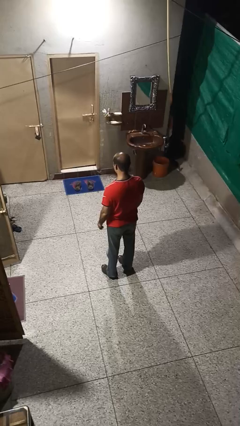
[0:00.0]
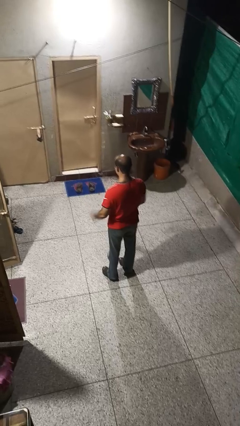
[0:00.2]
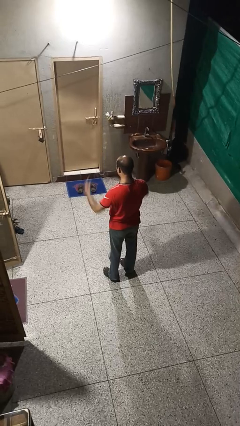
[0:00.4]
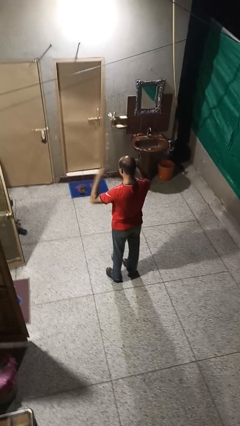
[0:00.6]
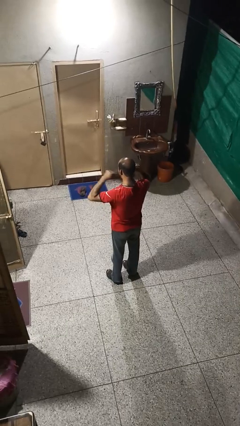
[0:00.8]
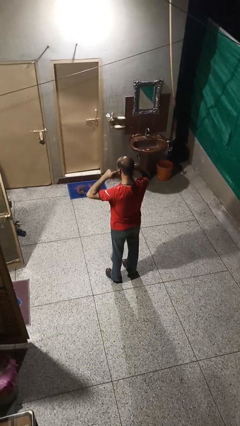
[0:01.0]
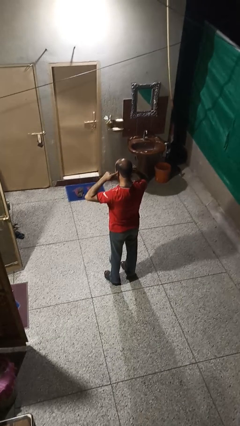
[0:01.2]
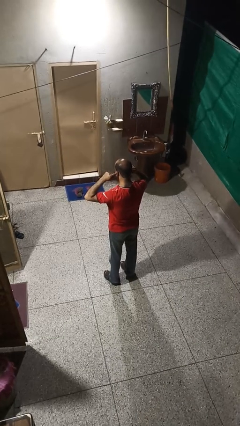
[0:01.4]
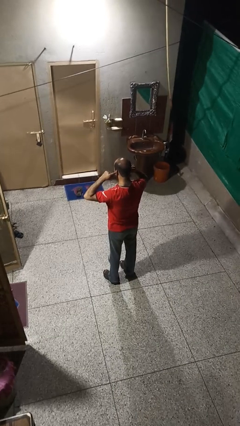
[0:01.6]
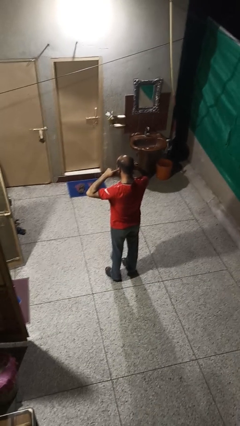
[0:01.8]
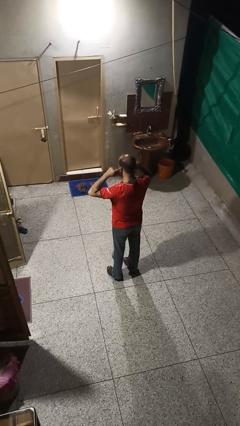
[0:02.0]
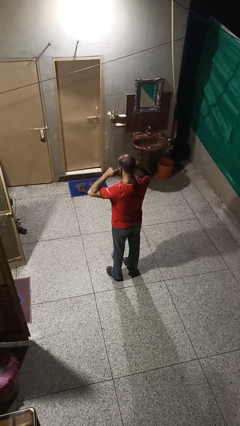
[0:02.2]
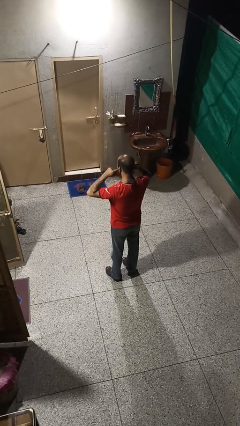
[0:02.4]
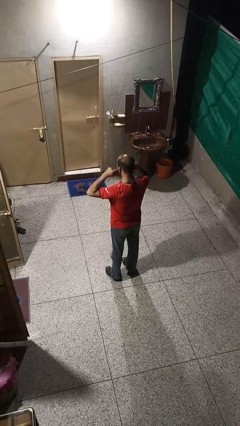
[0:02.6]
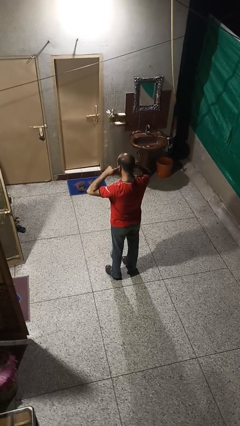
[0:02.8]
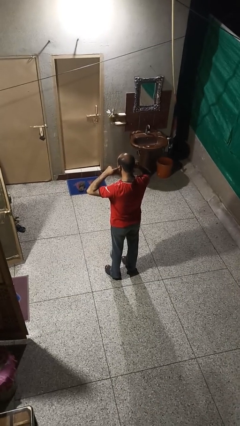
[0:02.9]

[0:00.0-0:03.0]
person puts fingers in ear

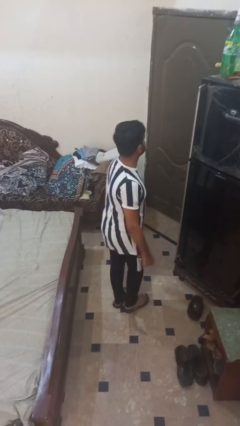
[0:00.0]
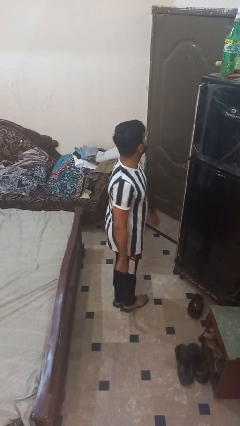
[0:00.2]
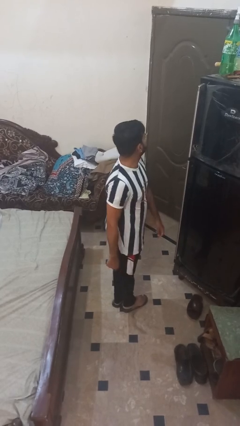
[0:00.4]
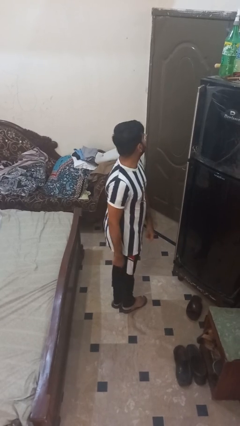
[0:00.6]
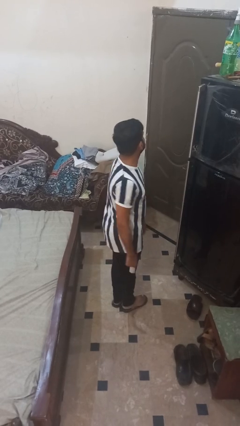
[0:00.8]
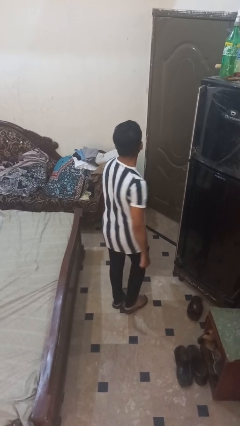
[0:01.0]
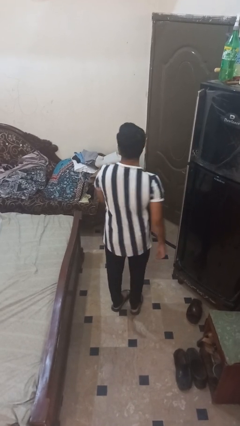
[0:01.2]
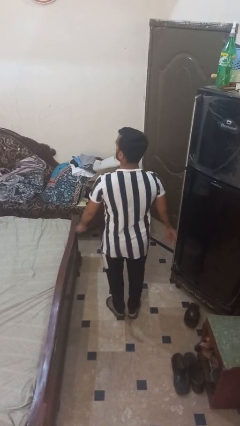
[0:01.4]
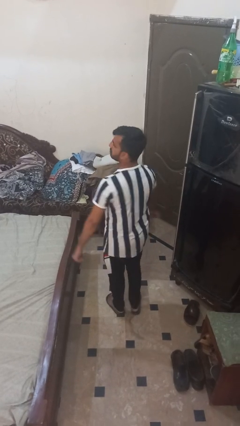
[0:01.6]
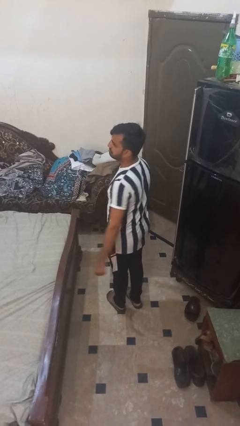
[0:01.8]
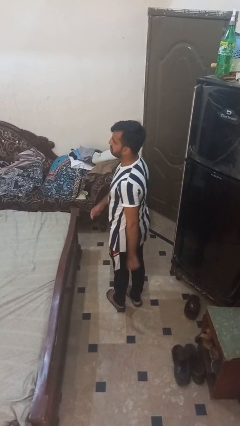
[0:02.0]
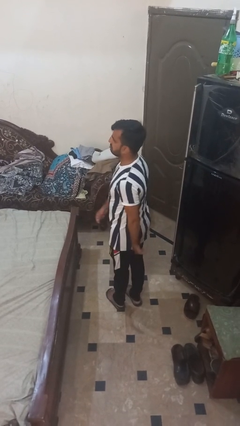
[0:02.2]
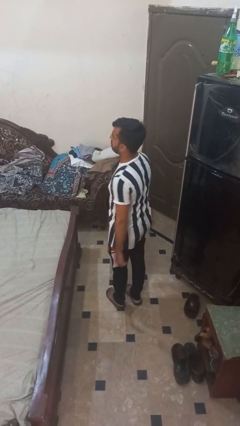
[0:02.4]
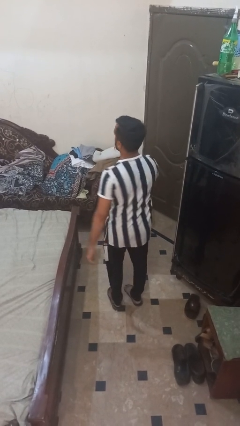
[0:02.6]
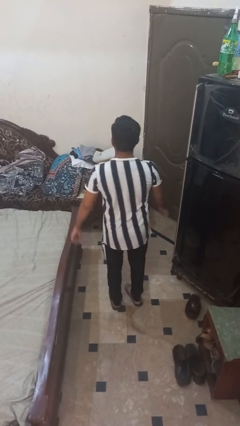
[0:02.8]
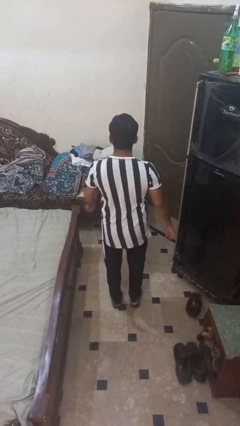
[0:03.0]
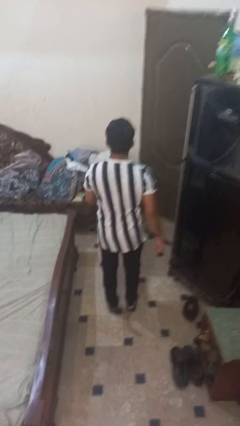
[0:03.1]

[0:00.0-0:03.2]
person twirls

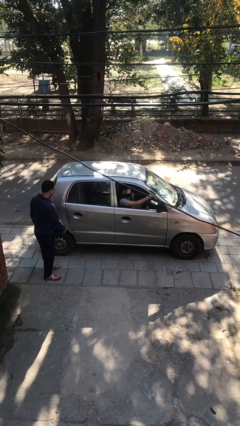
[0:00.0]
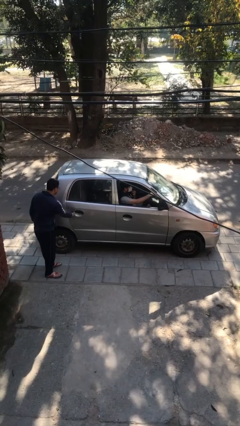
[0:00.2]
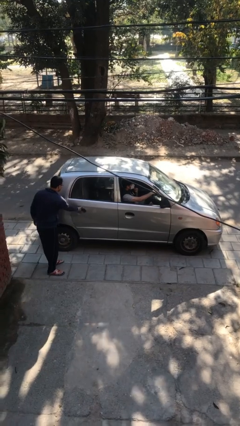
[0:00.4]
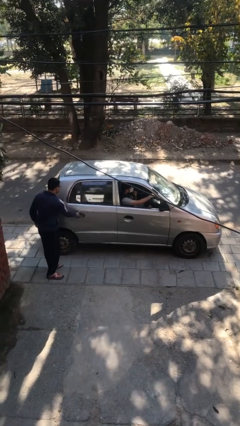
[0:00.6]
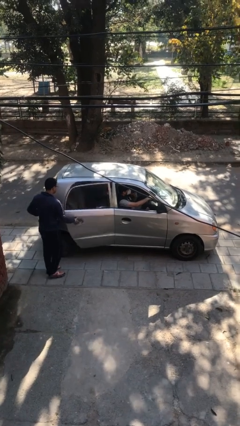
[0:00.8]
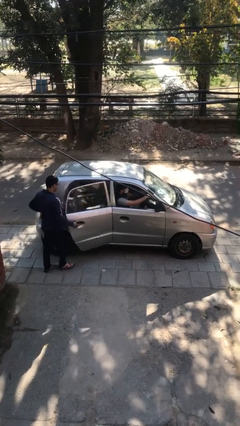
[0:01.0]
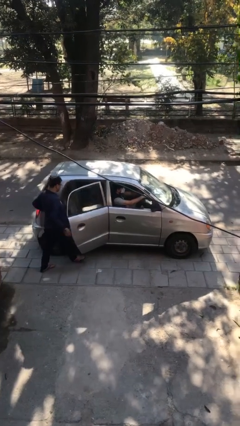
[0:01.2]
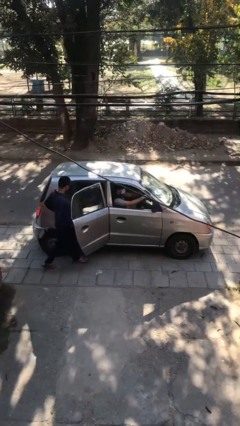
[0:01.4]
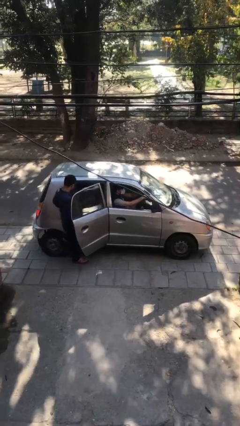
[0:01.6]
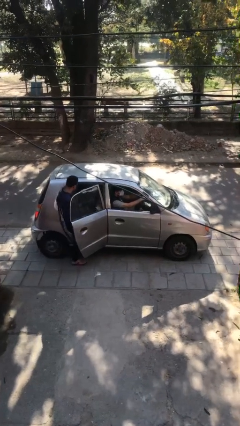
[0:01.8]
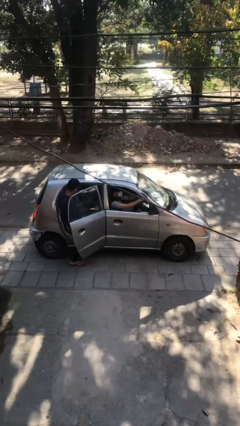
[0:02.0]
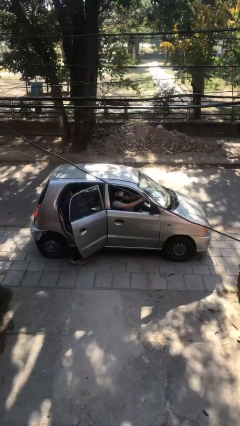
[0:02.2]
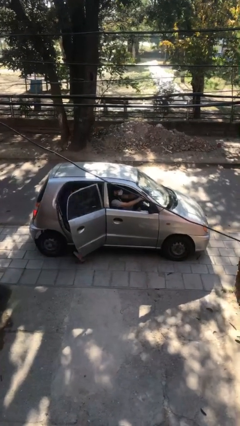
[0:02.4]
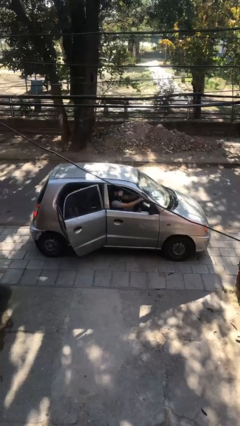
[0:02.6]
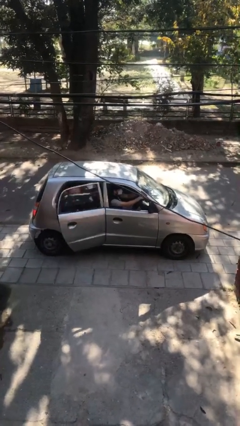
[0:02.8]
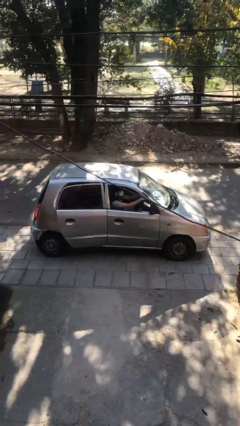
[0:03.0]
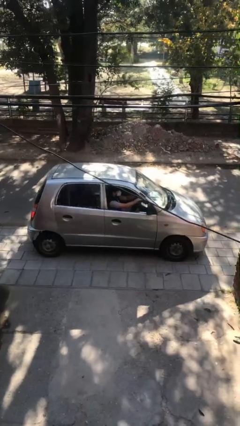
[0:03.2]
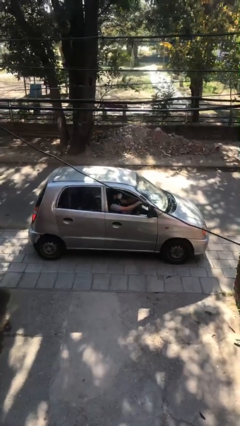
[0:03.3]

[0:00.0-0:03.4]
car picks up person

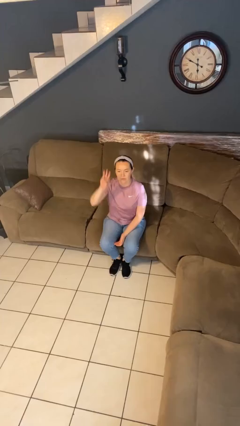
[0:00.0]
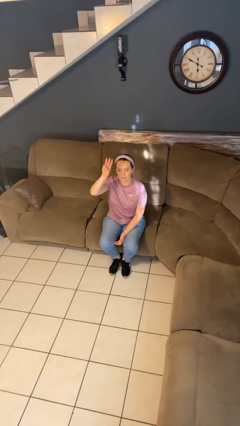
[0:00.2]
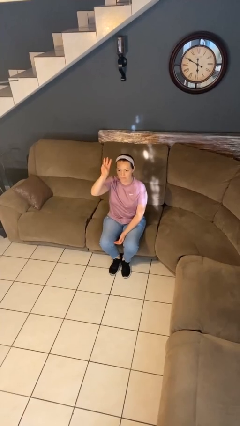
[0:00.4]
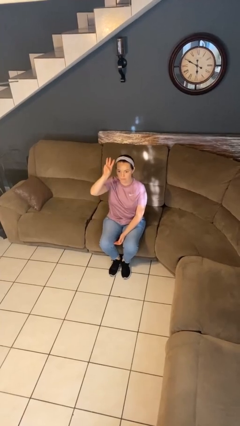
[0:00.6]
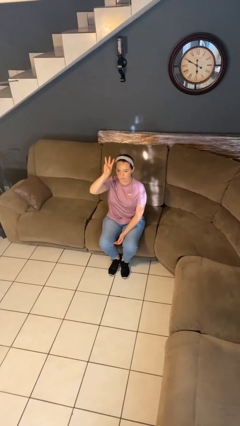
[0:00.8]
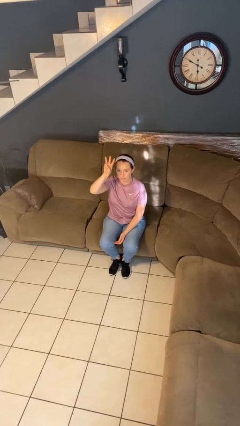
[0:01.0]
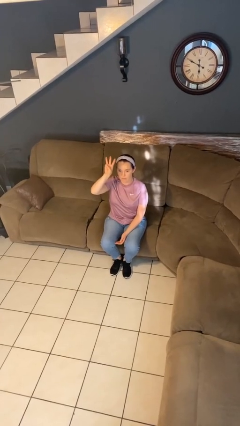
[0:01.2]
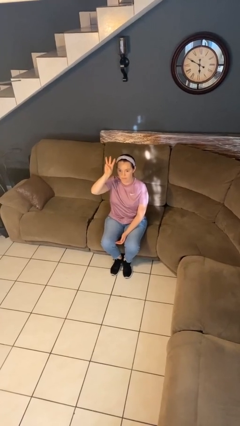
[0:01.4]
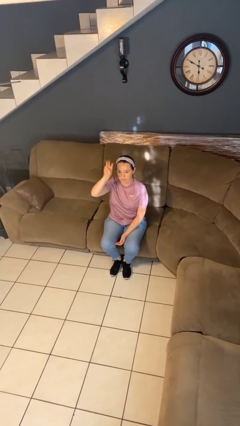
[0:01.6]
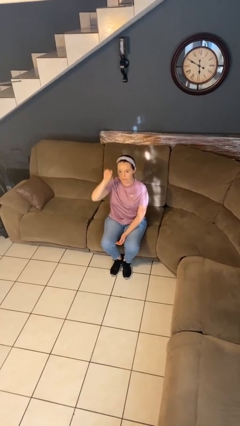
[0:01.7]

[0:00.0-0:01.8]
person gestures number three

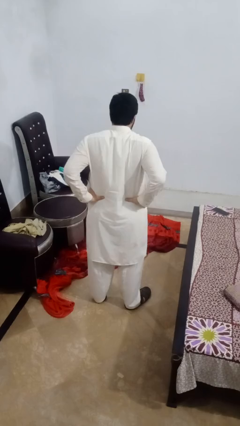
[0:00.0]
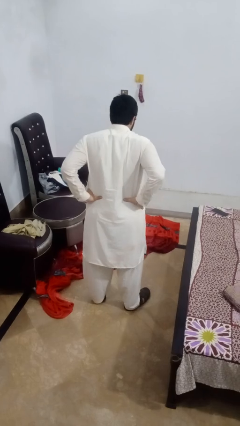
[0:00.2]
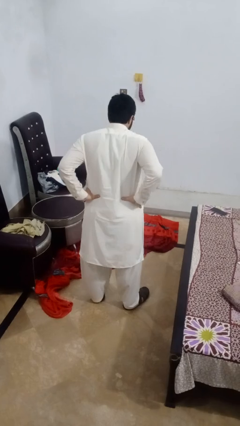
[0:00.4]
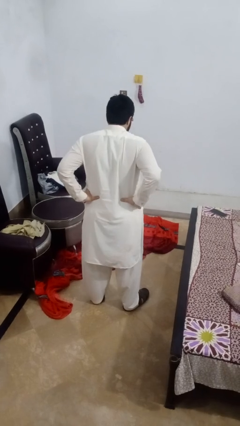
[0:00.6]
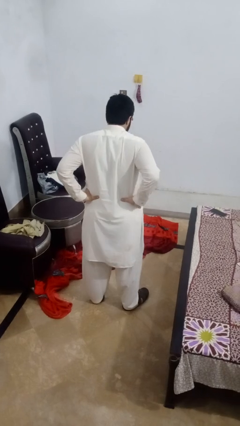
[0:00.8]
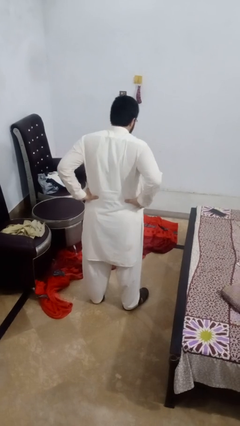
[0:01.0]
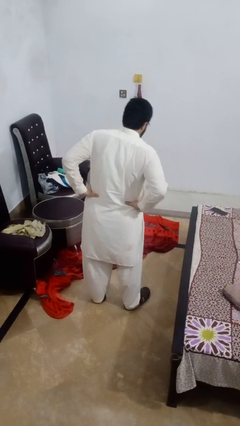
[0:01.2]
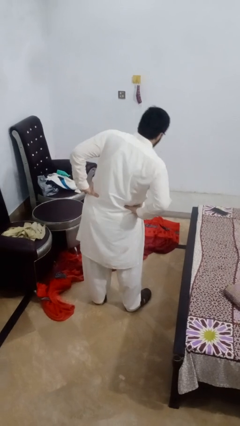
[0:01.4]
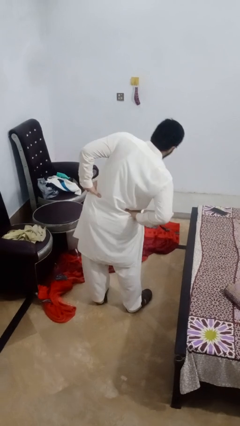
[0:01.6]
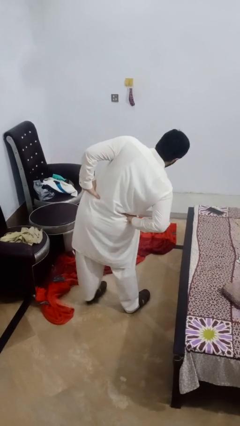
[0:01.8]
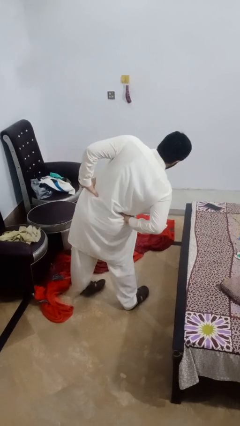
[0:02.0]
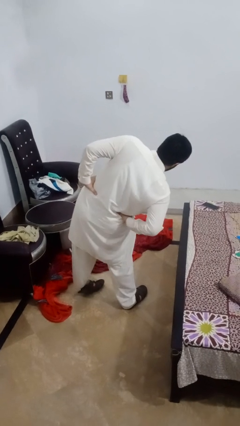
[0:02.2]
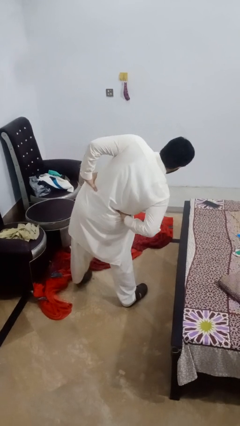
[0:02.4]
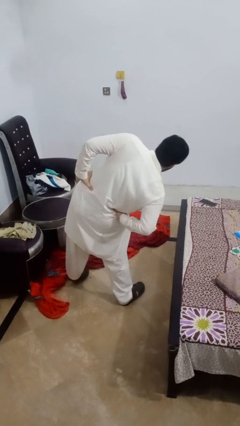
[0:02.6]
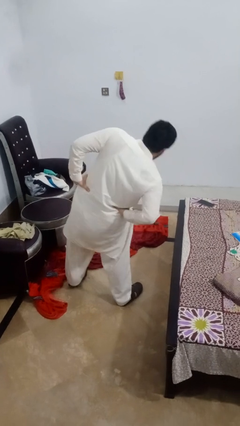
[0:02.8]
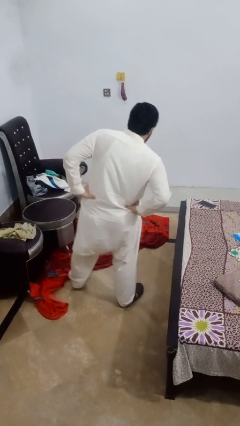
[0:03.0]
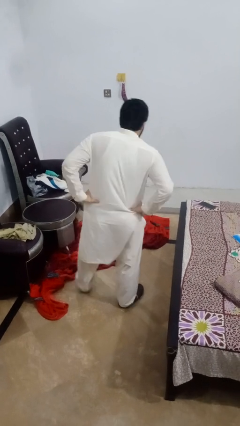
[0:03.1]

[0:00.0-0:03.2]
person stretches arms to side

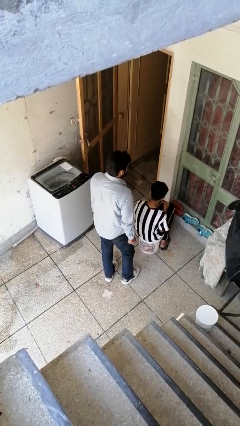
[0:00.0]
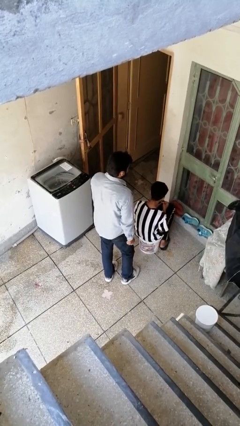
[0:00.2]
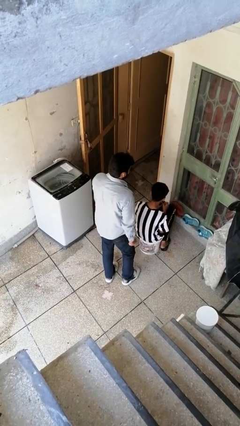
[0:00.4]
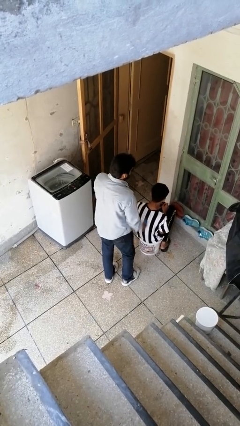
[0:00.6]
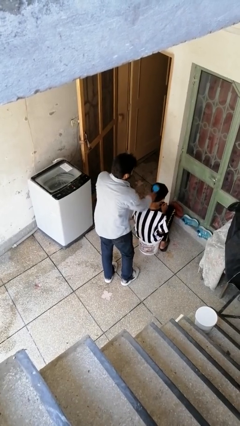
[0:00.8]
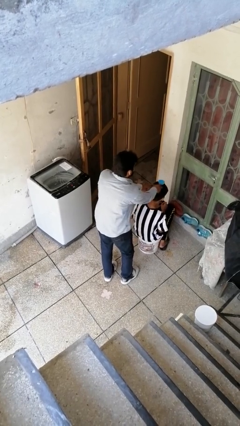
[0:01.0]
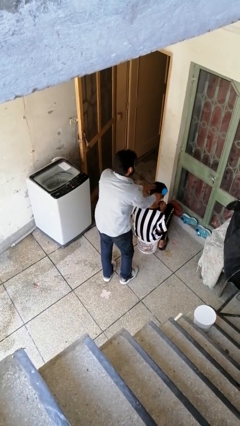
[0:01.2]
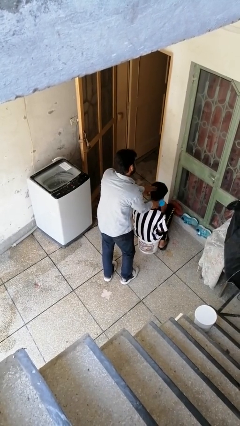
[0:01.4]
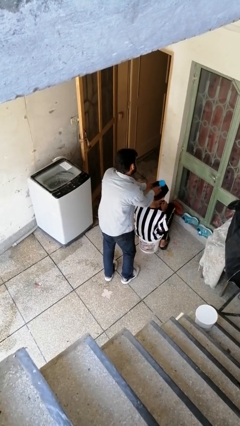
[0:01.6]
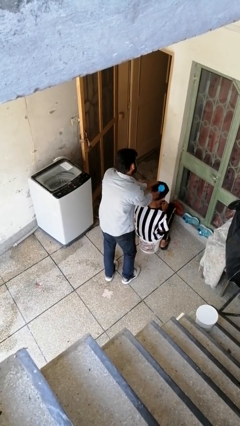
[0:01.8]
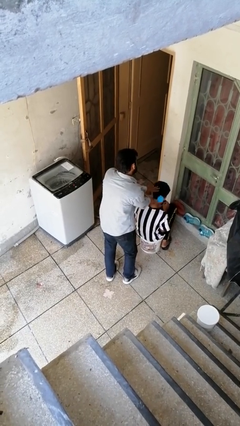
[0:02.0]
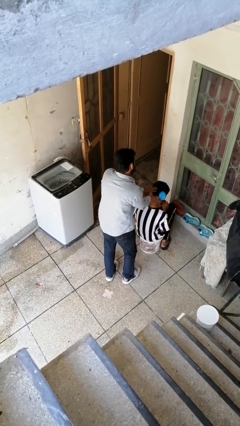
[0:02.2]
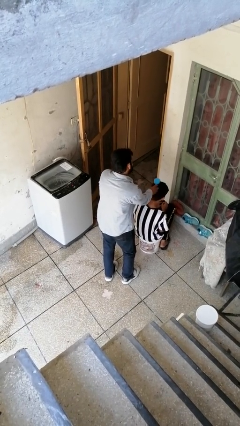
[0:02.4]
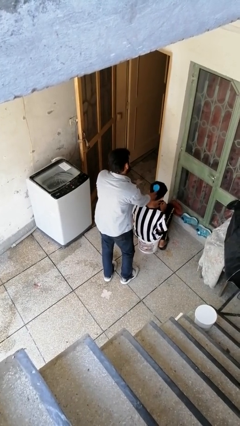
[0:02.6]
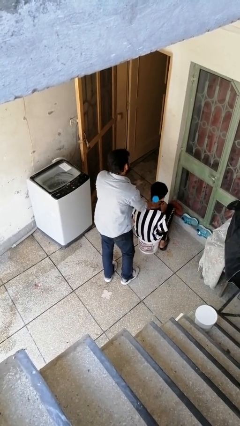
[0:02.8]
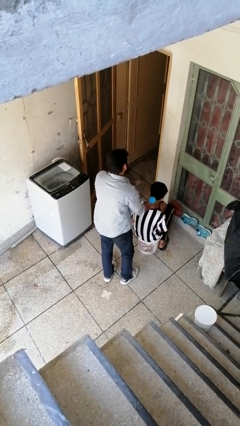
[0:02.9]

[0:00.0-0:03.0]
person brushes hair of person
